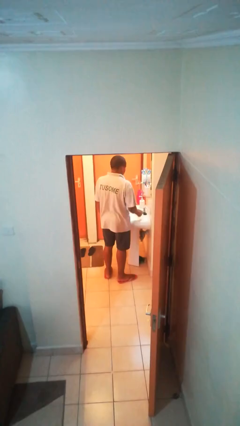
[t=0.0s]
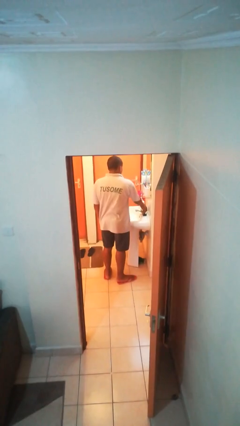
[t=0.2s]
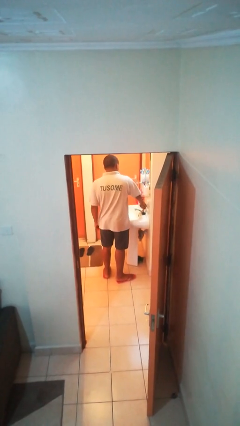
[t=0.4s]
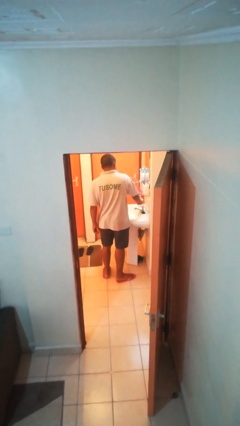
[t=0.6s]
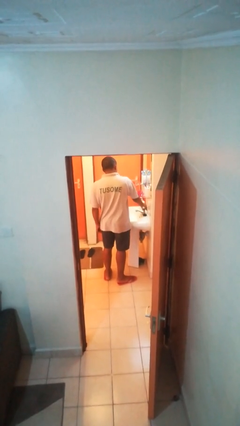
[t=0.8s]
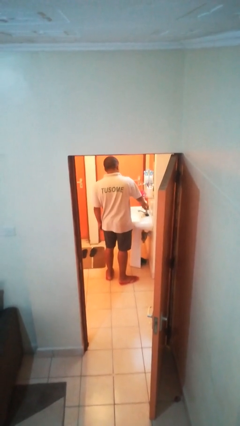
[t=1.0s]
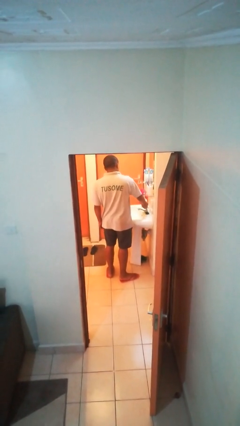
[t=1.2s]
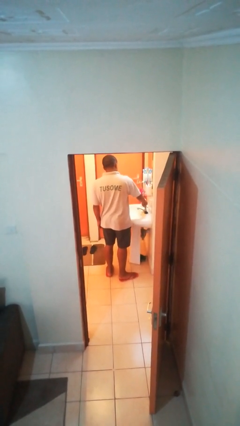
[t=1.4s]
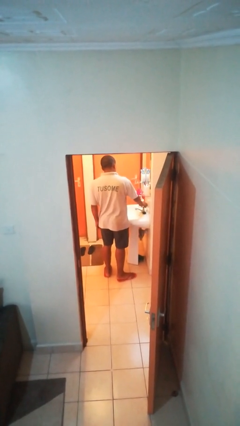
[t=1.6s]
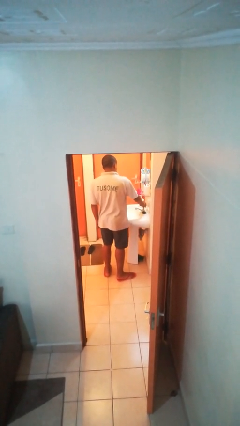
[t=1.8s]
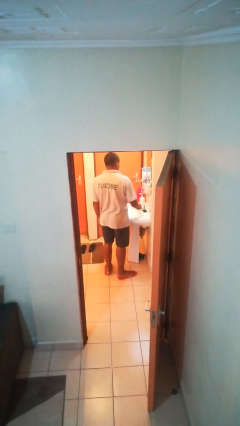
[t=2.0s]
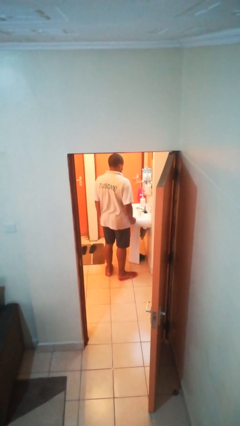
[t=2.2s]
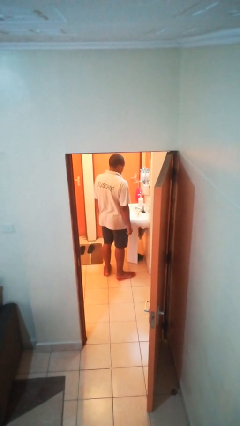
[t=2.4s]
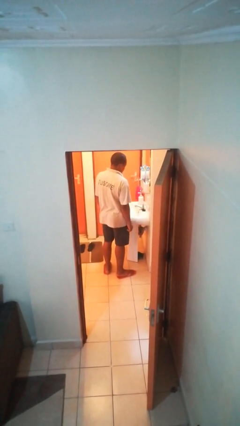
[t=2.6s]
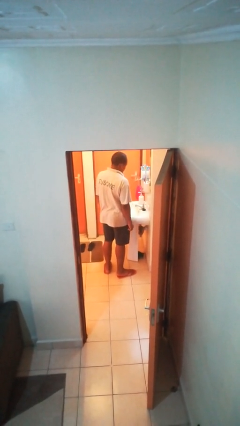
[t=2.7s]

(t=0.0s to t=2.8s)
person turns on faucet

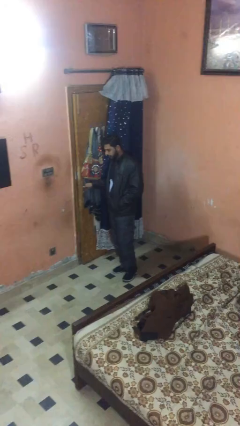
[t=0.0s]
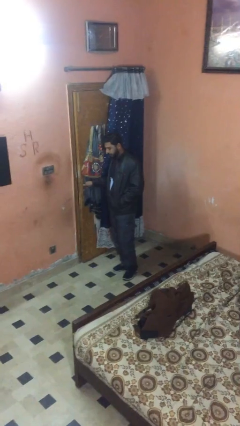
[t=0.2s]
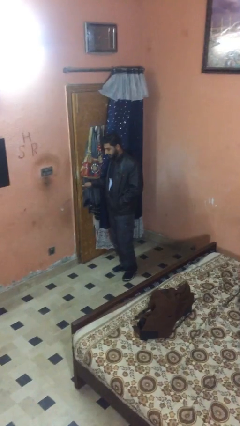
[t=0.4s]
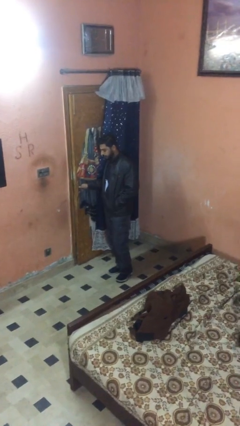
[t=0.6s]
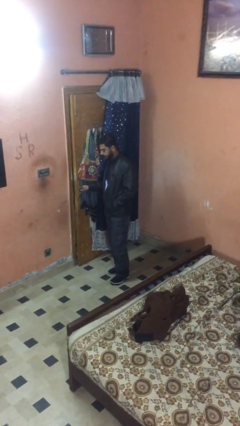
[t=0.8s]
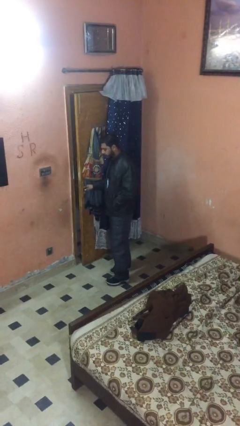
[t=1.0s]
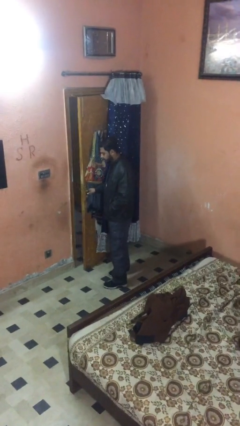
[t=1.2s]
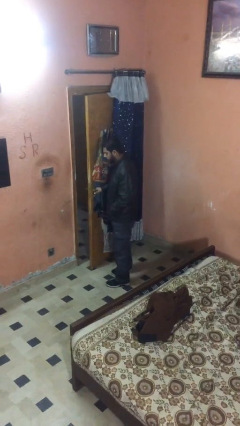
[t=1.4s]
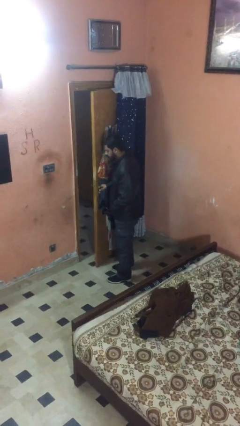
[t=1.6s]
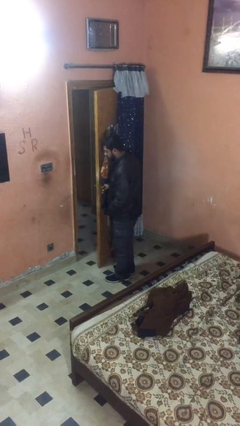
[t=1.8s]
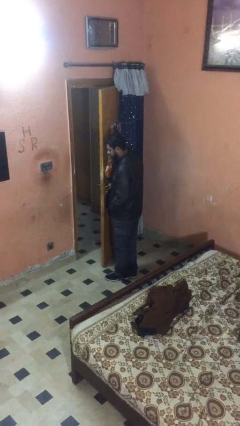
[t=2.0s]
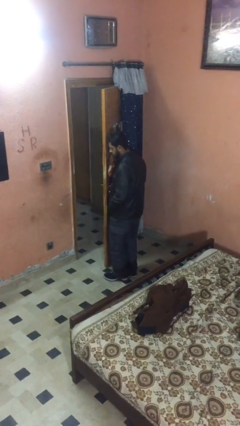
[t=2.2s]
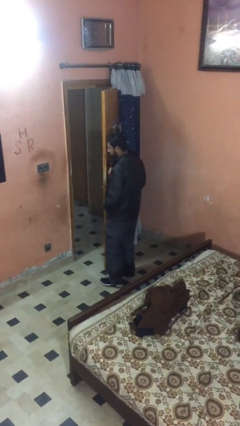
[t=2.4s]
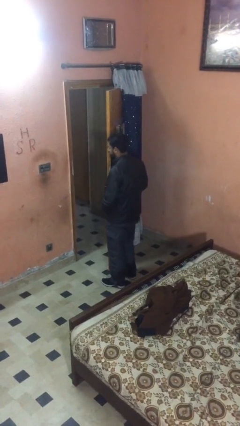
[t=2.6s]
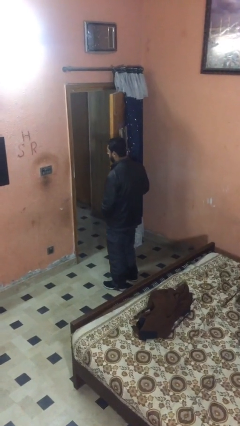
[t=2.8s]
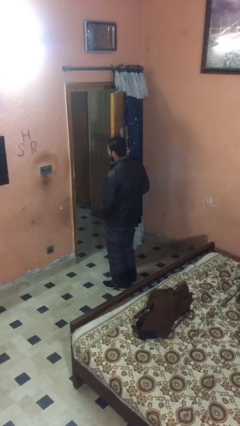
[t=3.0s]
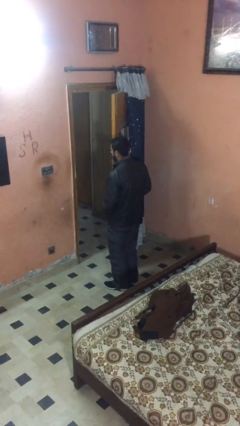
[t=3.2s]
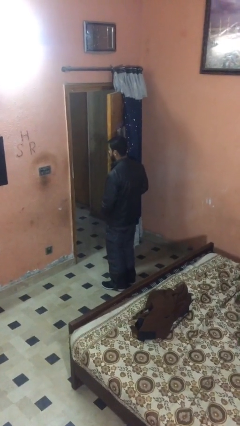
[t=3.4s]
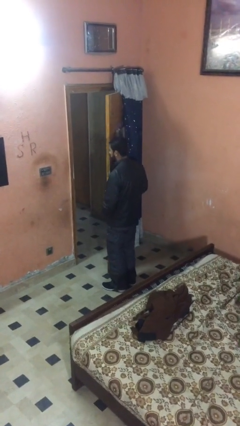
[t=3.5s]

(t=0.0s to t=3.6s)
person opens facility door

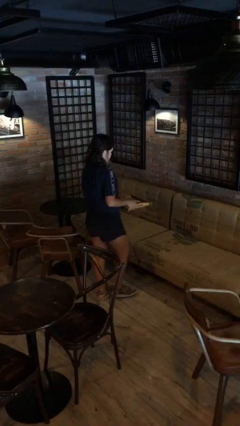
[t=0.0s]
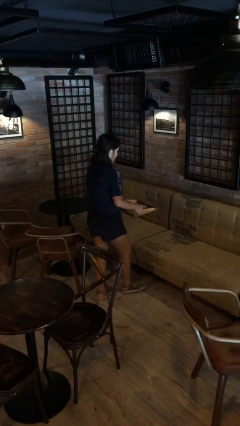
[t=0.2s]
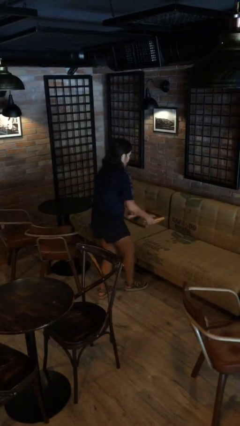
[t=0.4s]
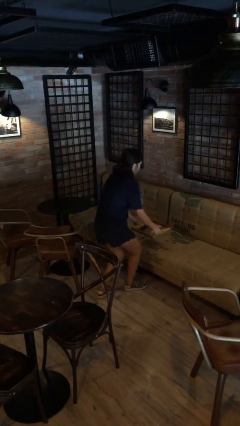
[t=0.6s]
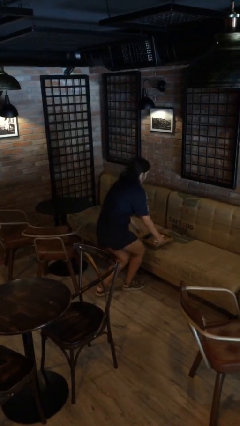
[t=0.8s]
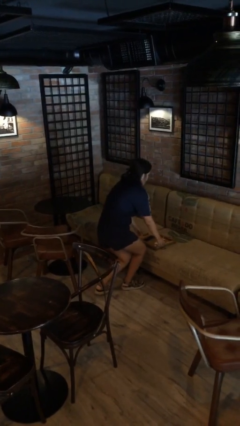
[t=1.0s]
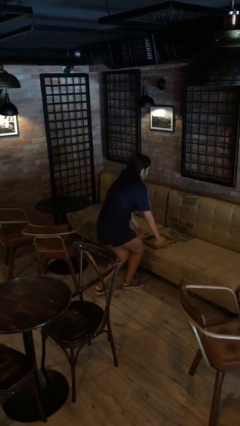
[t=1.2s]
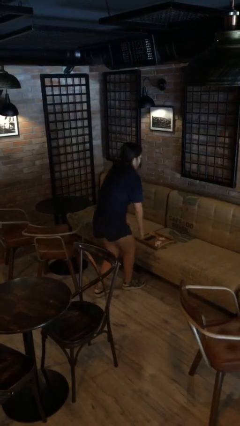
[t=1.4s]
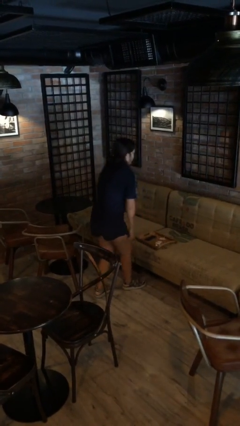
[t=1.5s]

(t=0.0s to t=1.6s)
person puts down object on couch

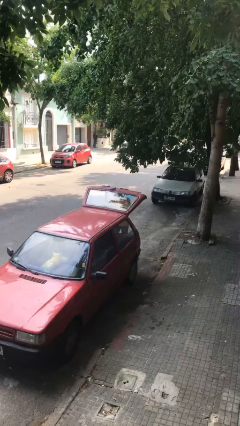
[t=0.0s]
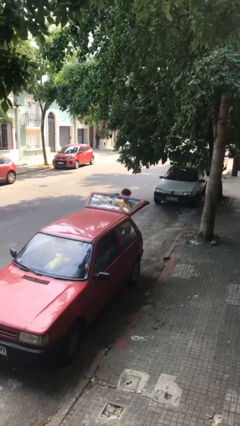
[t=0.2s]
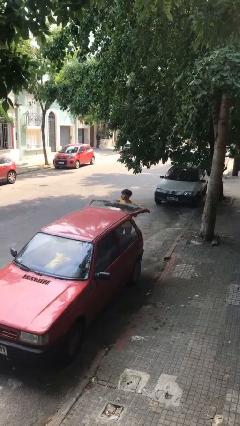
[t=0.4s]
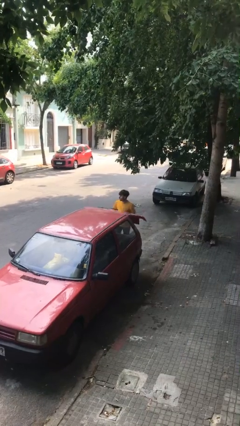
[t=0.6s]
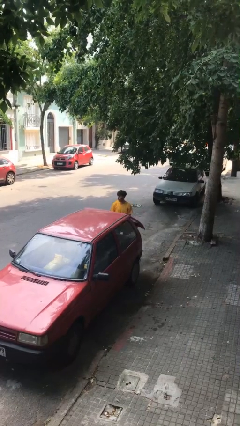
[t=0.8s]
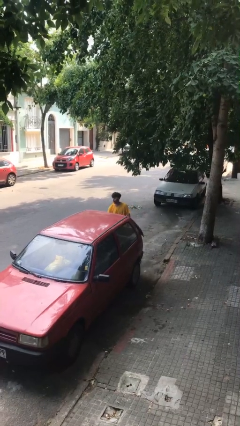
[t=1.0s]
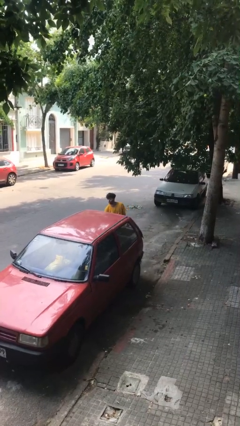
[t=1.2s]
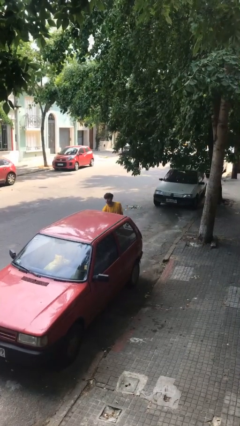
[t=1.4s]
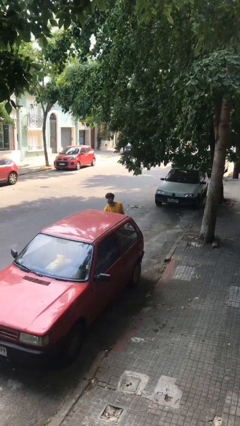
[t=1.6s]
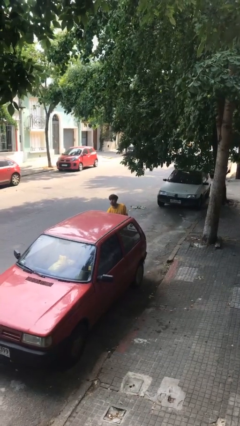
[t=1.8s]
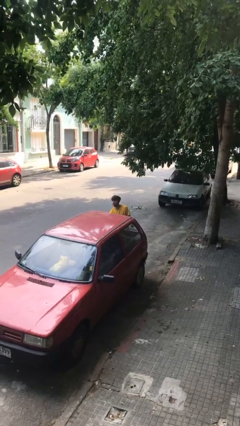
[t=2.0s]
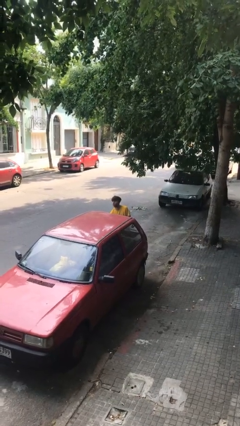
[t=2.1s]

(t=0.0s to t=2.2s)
person closes car trunk

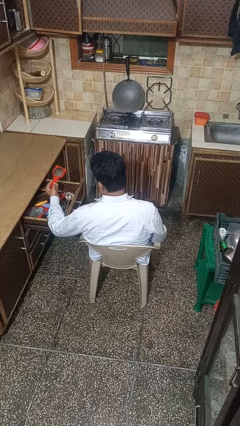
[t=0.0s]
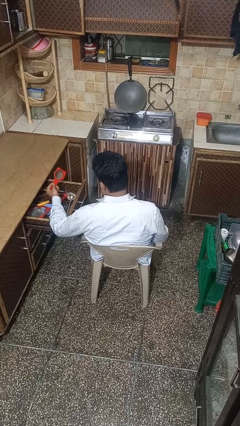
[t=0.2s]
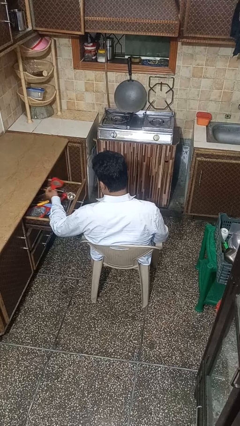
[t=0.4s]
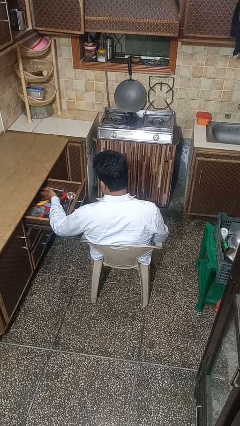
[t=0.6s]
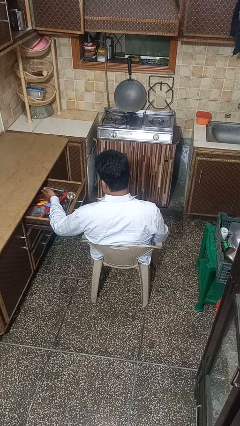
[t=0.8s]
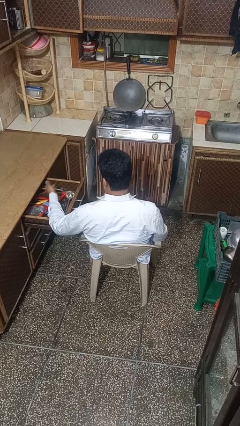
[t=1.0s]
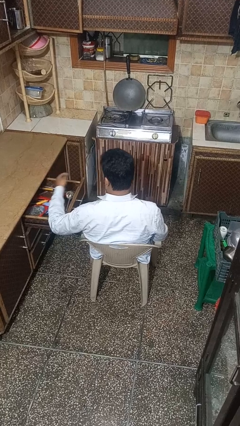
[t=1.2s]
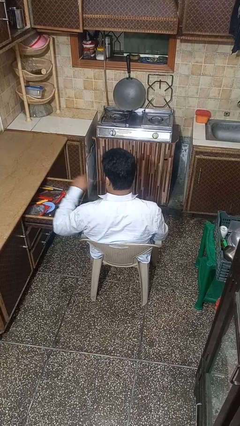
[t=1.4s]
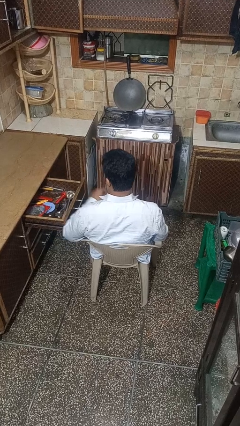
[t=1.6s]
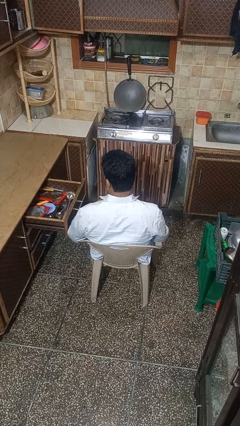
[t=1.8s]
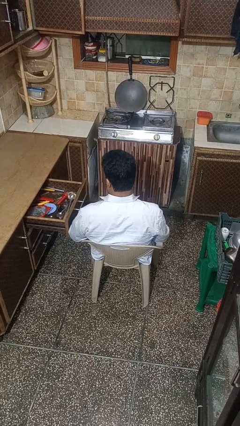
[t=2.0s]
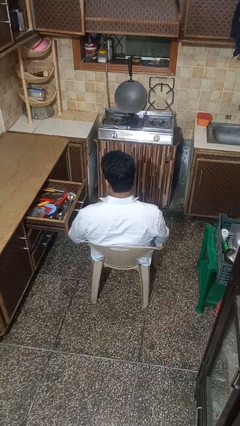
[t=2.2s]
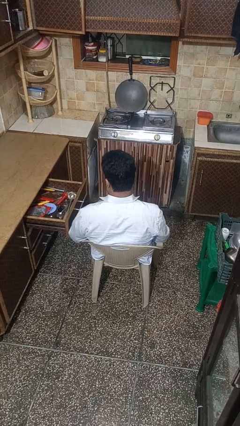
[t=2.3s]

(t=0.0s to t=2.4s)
person puts object into kitchen drawer

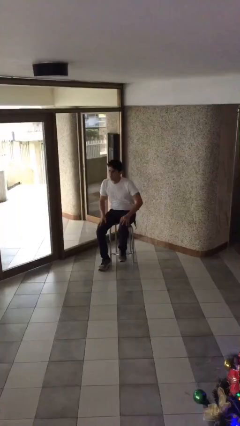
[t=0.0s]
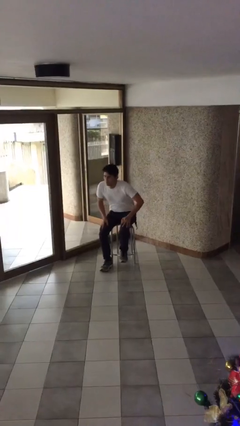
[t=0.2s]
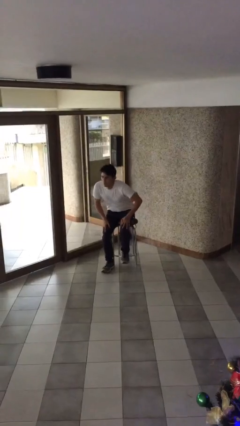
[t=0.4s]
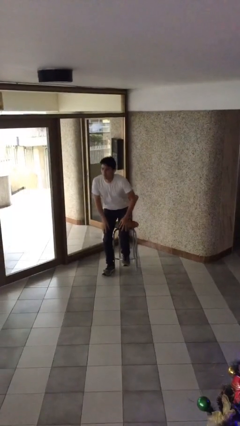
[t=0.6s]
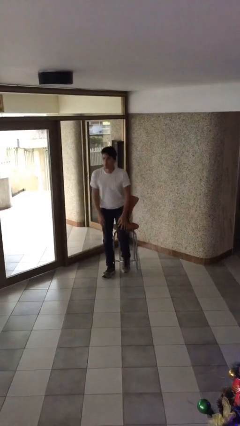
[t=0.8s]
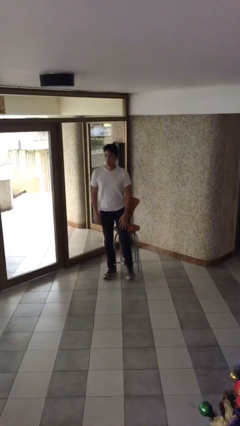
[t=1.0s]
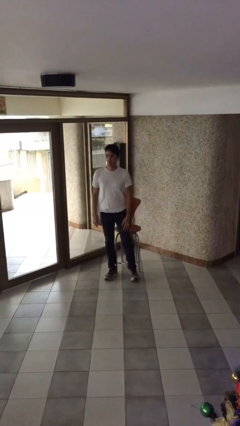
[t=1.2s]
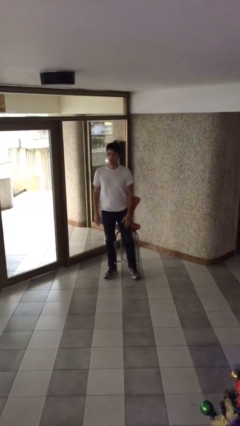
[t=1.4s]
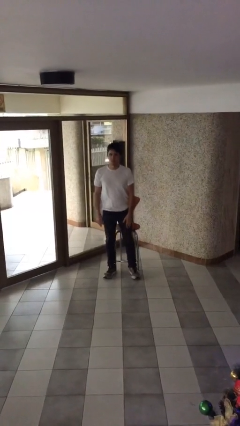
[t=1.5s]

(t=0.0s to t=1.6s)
person stands up

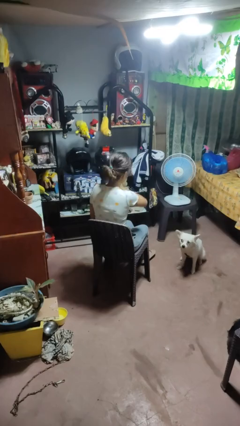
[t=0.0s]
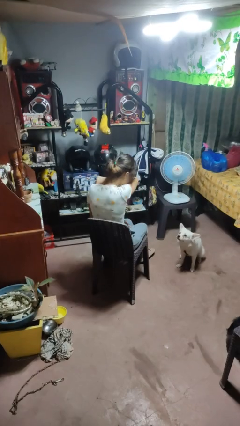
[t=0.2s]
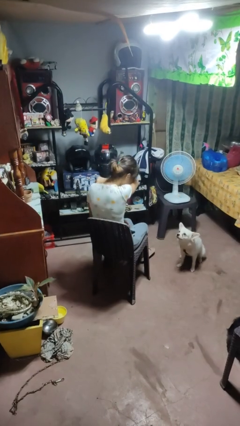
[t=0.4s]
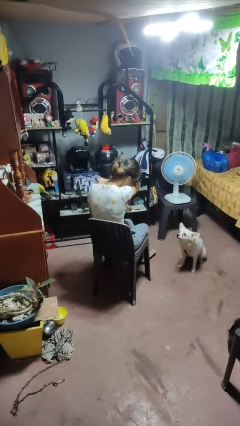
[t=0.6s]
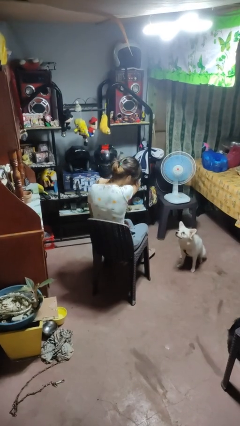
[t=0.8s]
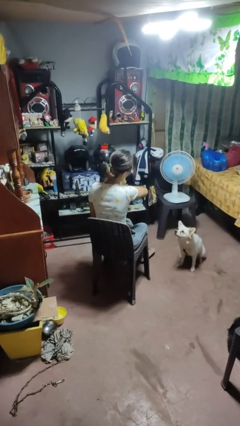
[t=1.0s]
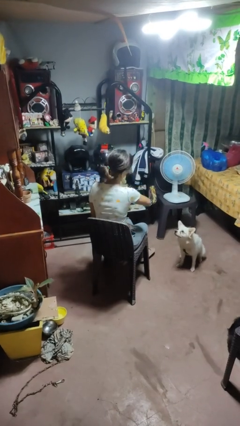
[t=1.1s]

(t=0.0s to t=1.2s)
person sneezes into arm

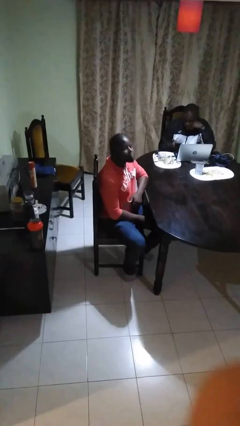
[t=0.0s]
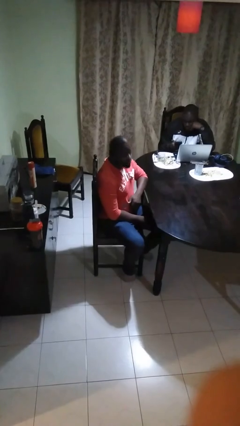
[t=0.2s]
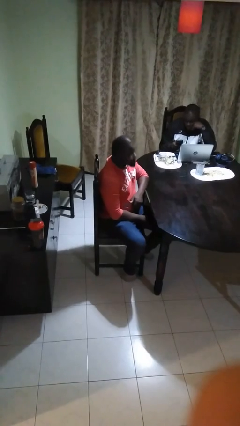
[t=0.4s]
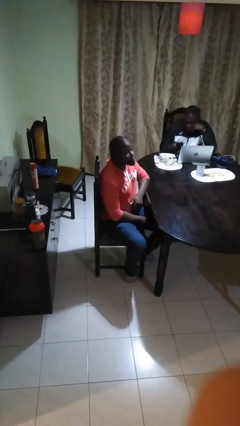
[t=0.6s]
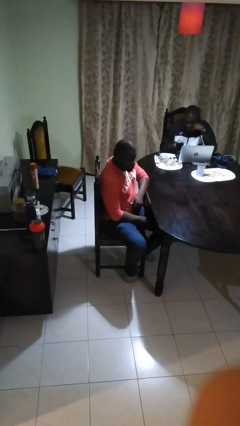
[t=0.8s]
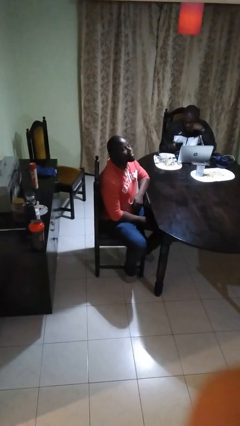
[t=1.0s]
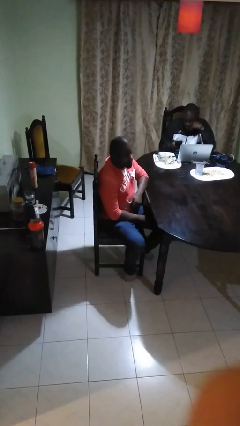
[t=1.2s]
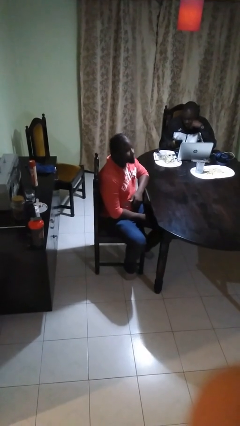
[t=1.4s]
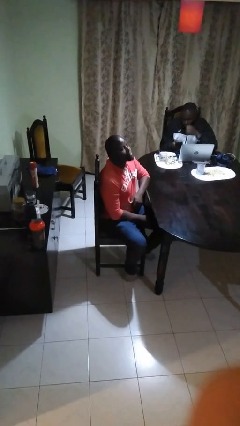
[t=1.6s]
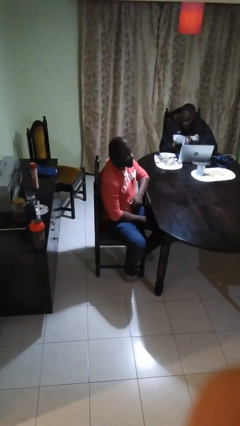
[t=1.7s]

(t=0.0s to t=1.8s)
person nods head
